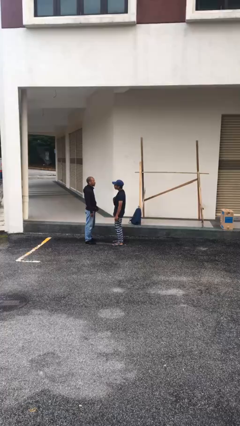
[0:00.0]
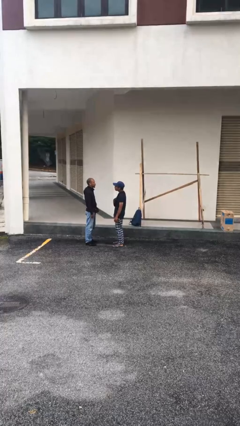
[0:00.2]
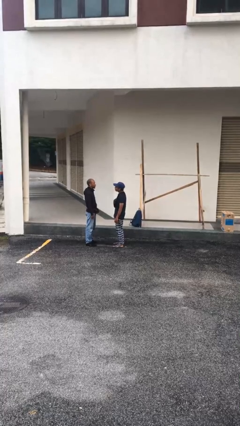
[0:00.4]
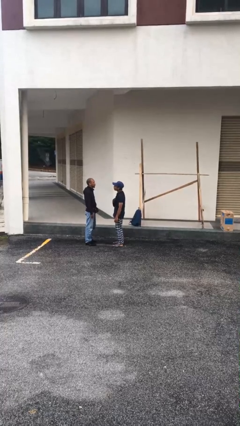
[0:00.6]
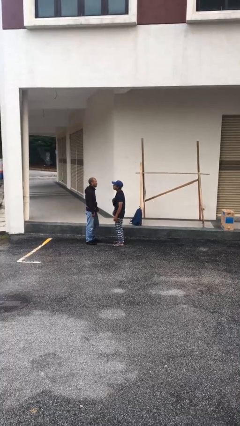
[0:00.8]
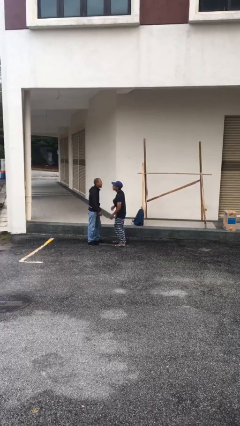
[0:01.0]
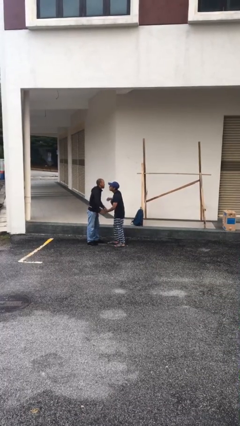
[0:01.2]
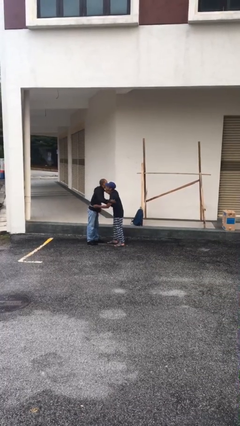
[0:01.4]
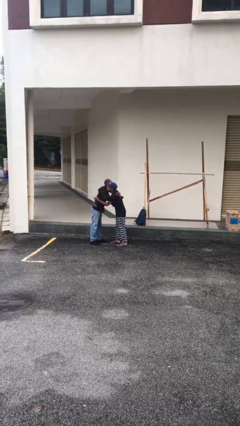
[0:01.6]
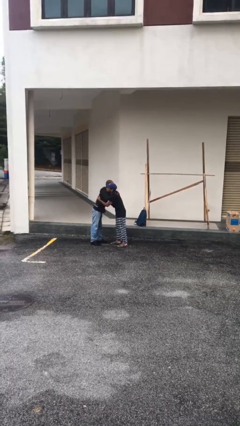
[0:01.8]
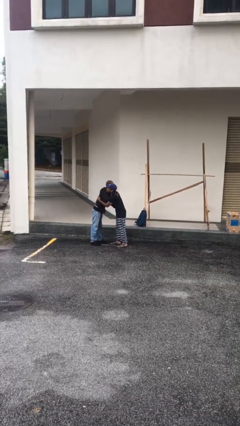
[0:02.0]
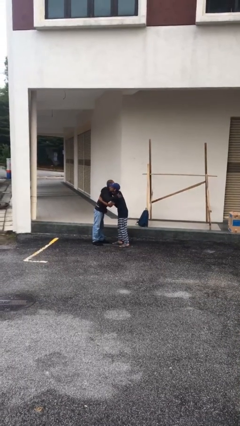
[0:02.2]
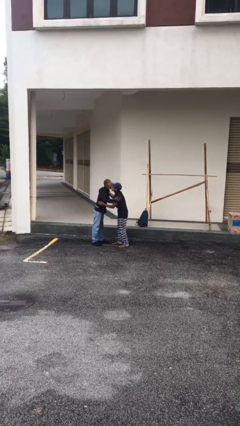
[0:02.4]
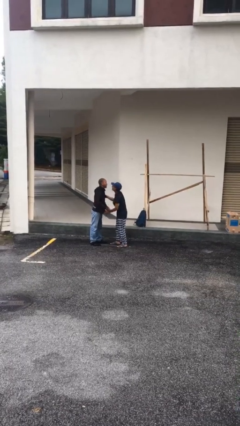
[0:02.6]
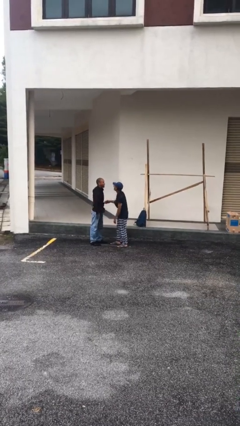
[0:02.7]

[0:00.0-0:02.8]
person embraces person

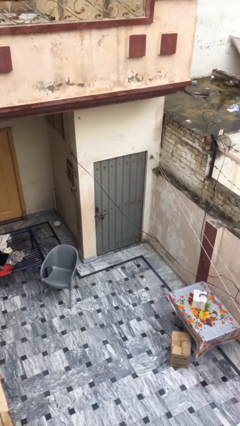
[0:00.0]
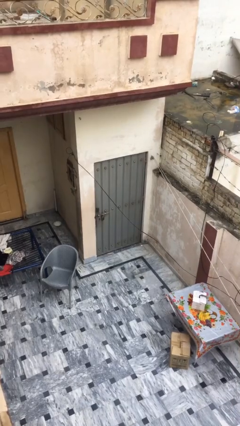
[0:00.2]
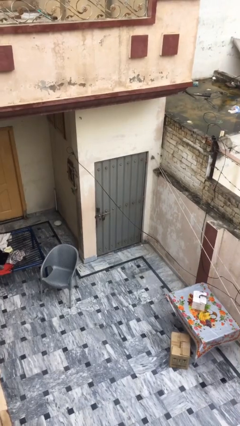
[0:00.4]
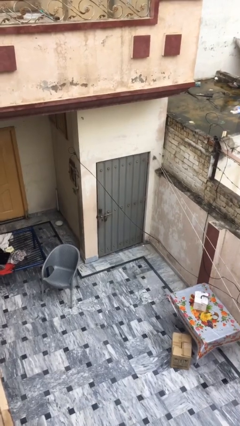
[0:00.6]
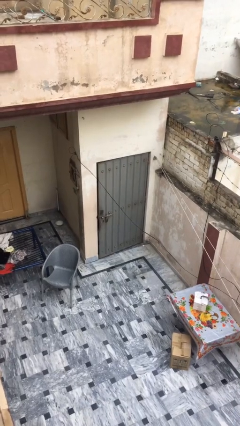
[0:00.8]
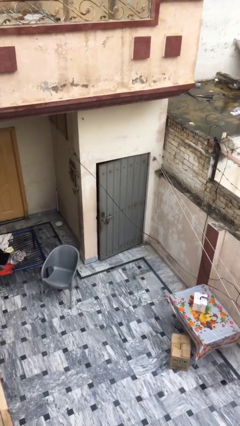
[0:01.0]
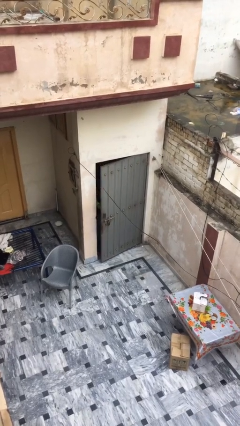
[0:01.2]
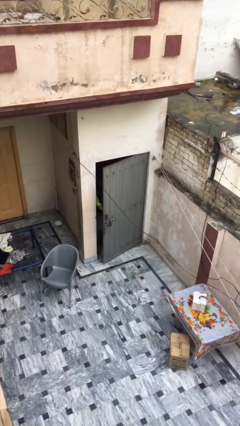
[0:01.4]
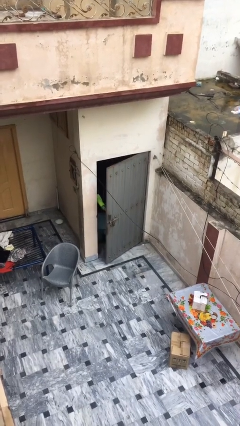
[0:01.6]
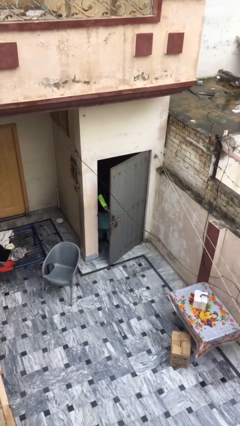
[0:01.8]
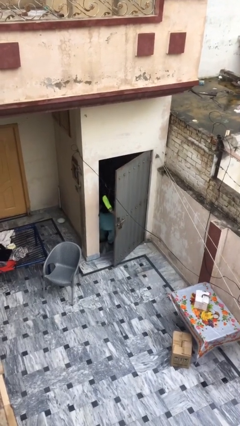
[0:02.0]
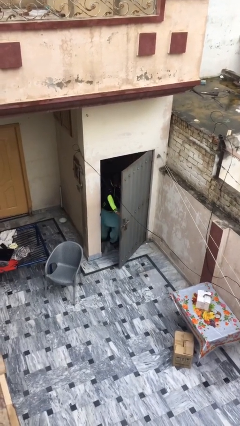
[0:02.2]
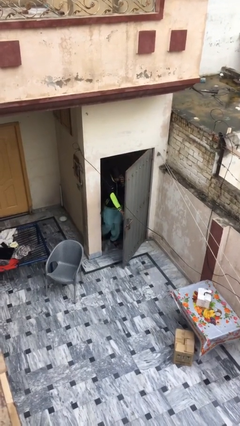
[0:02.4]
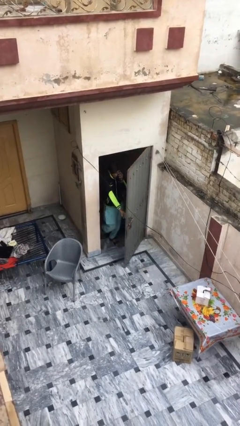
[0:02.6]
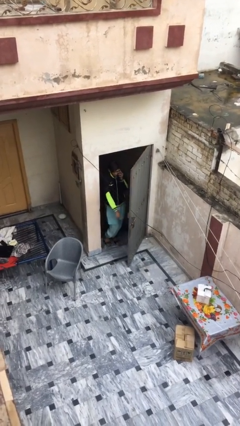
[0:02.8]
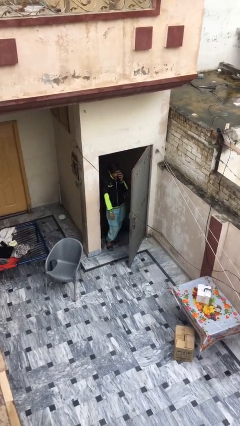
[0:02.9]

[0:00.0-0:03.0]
person opens facility door

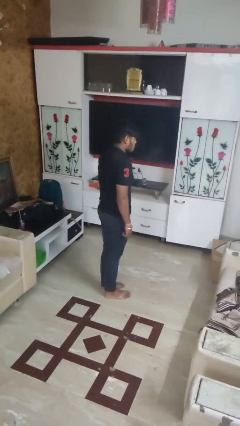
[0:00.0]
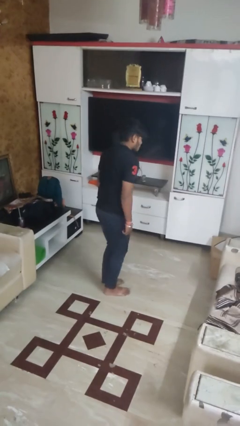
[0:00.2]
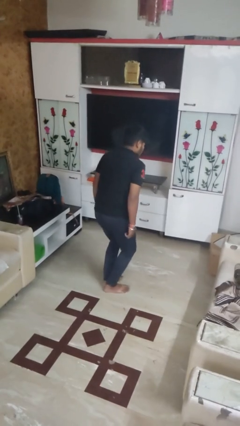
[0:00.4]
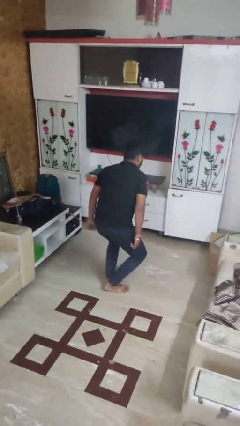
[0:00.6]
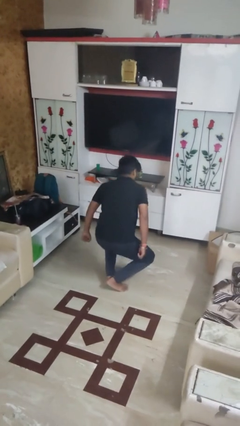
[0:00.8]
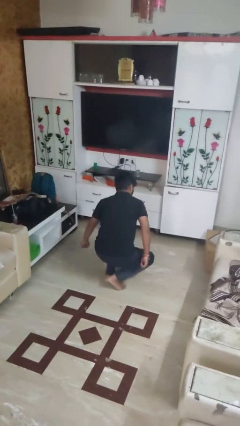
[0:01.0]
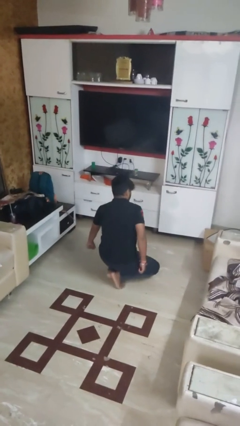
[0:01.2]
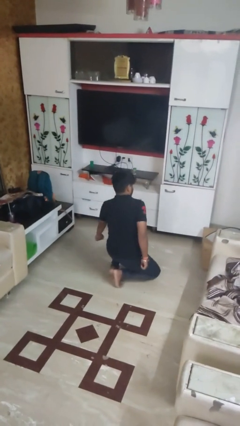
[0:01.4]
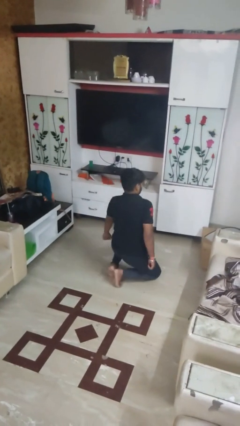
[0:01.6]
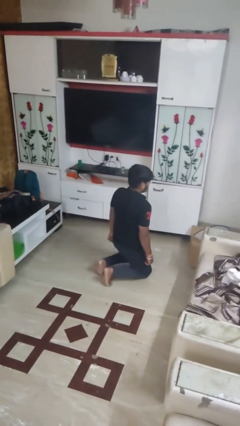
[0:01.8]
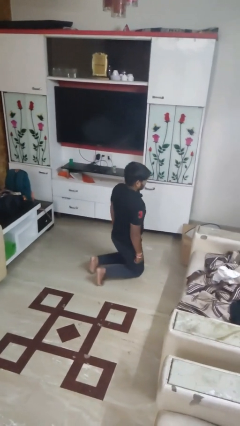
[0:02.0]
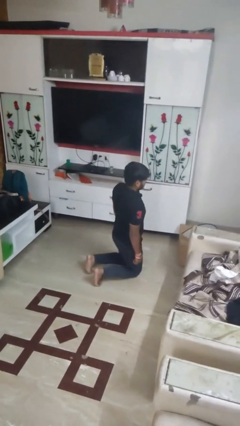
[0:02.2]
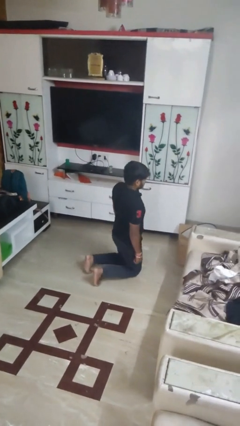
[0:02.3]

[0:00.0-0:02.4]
person kneels

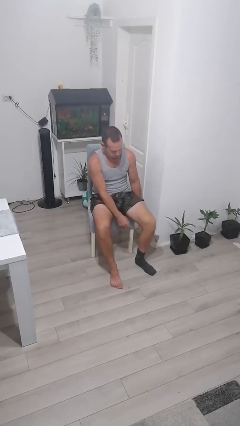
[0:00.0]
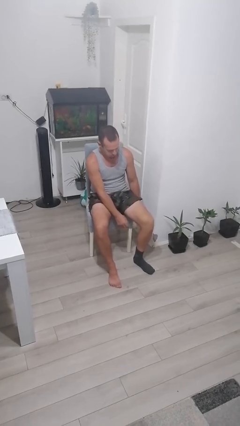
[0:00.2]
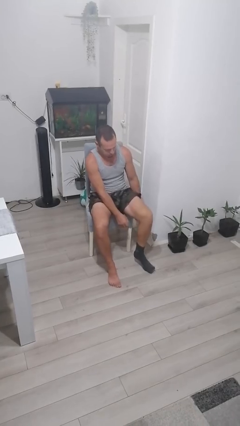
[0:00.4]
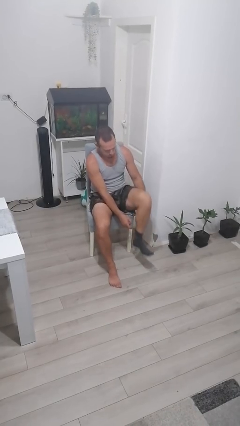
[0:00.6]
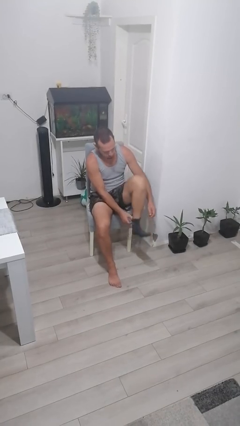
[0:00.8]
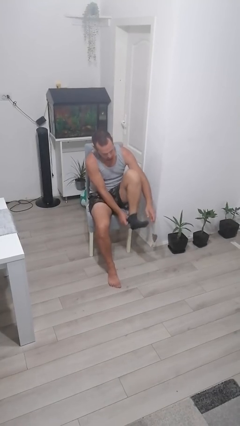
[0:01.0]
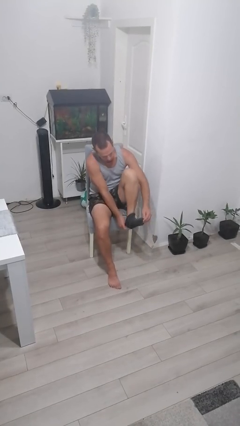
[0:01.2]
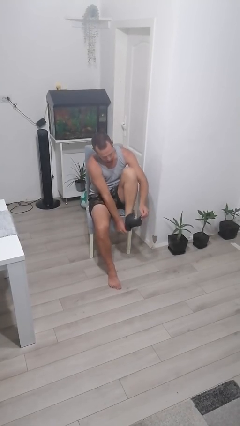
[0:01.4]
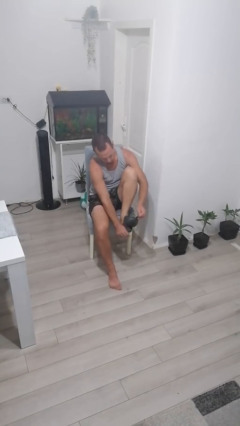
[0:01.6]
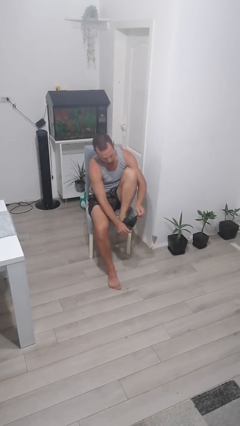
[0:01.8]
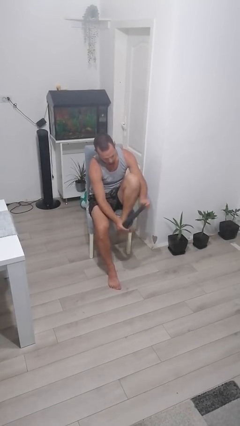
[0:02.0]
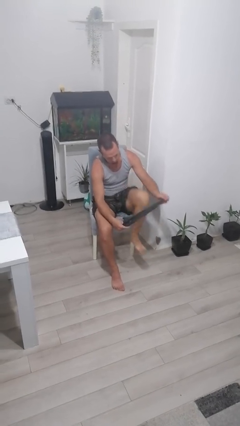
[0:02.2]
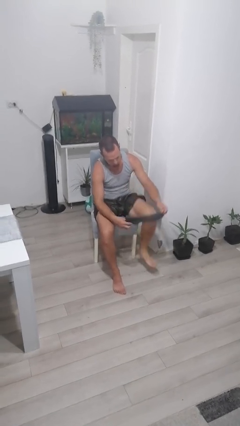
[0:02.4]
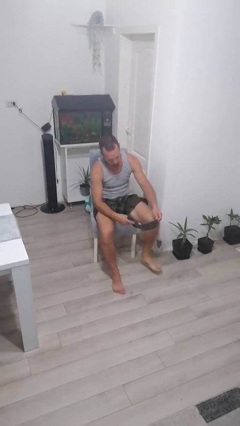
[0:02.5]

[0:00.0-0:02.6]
person takes off socks

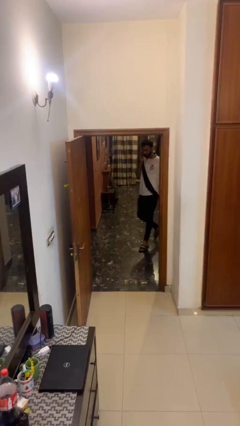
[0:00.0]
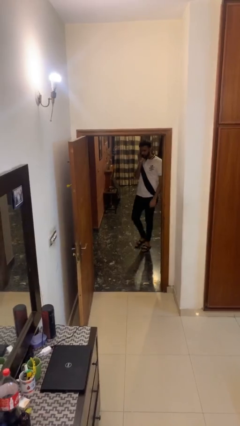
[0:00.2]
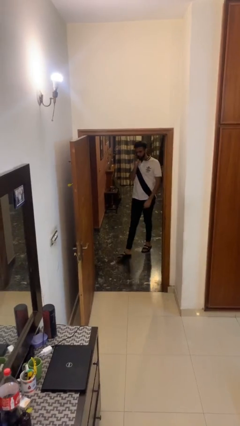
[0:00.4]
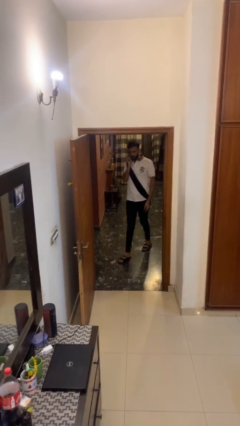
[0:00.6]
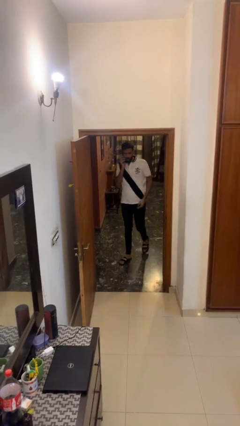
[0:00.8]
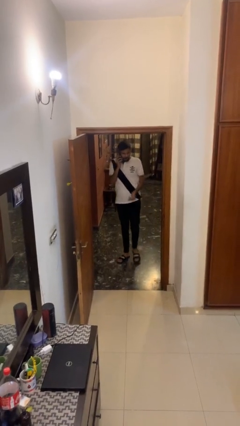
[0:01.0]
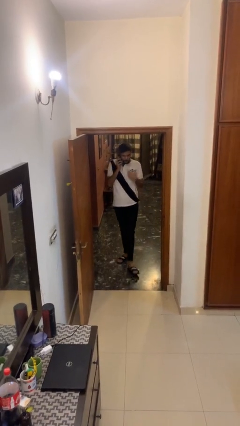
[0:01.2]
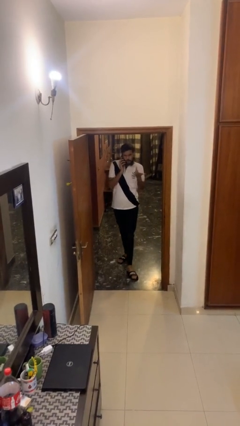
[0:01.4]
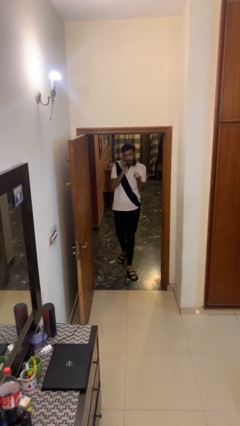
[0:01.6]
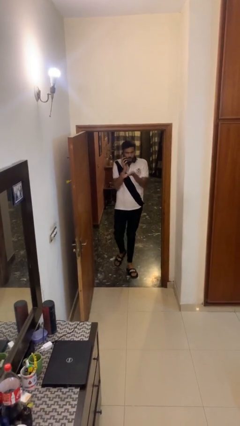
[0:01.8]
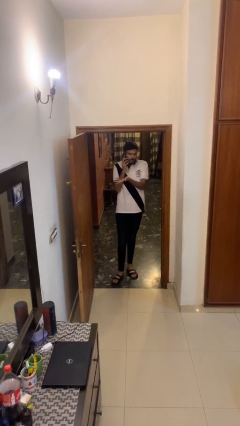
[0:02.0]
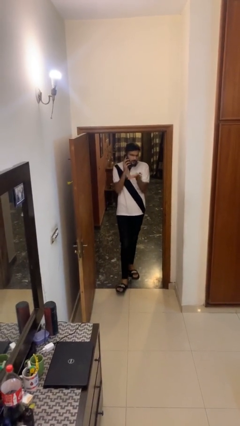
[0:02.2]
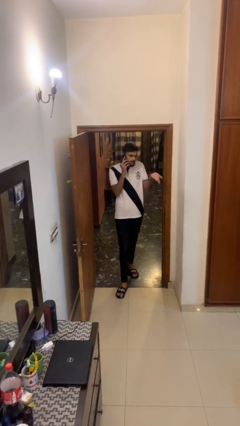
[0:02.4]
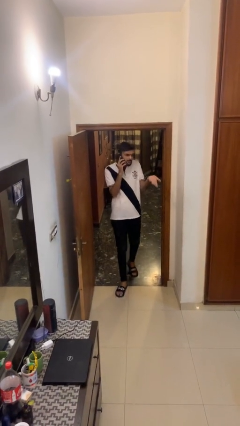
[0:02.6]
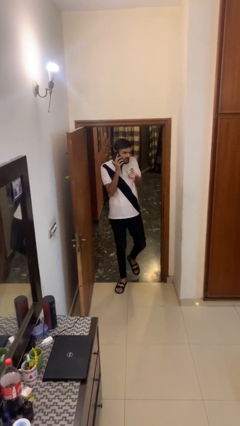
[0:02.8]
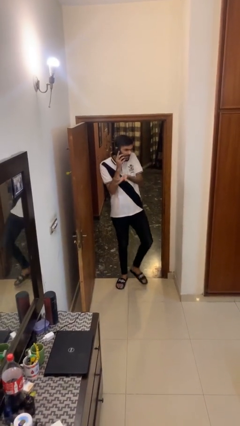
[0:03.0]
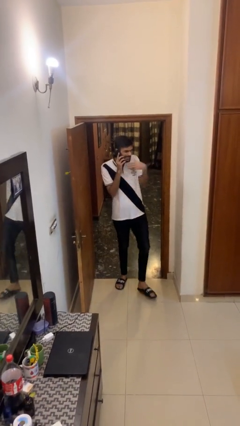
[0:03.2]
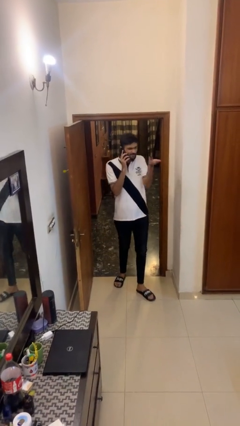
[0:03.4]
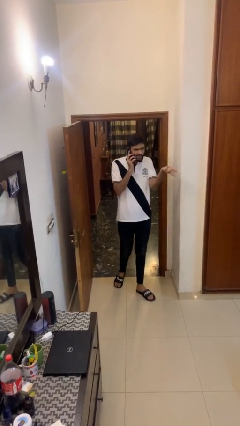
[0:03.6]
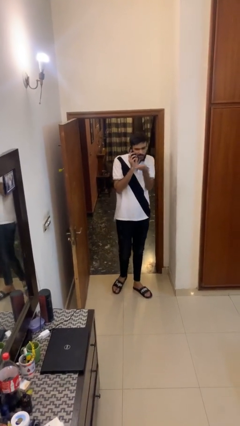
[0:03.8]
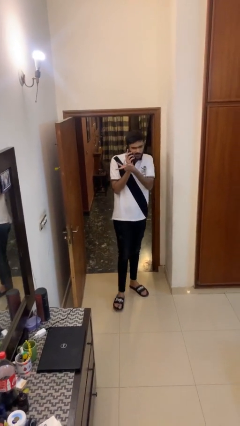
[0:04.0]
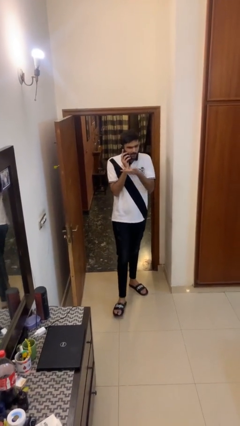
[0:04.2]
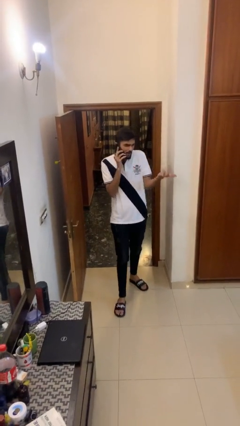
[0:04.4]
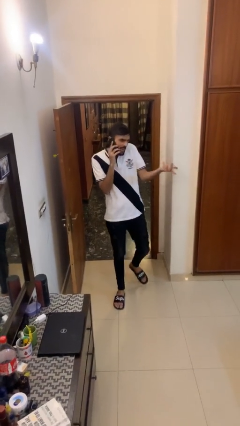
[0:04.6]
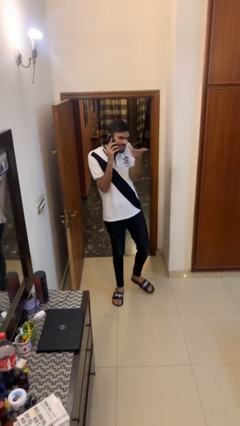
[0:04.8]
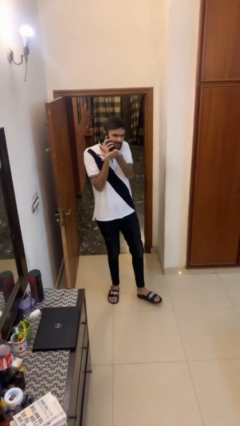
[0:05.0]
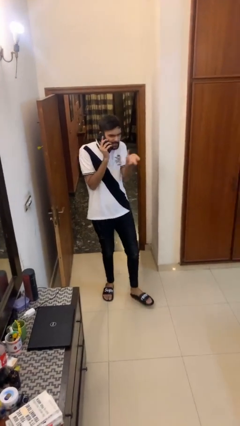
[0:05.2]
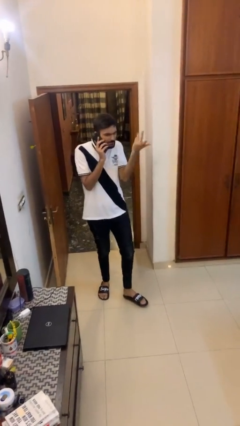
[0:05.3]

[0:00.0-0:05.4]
person enters scene through structure

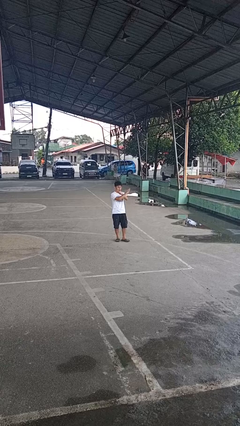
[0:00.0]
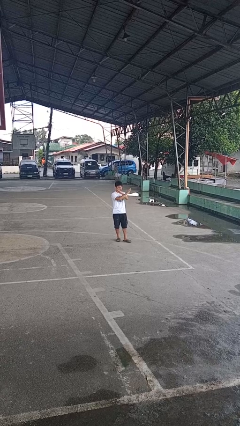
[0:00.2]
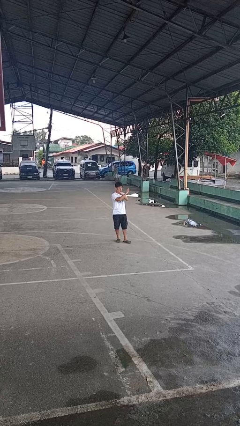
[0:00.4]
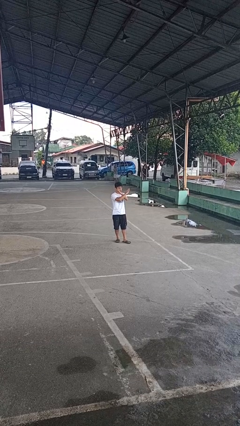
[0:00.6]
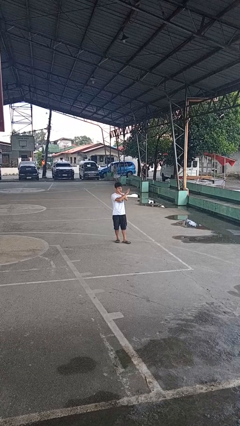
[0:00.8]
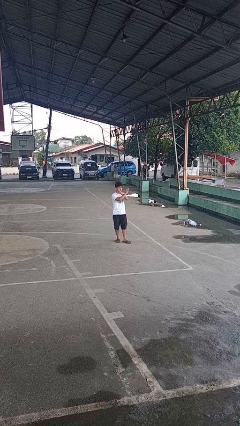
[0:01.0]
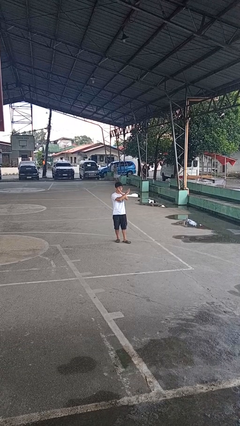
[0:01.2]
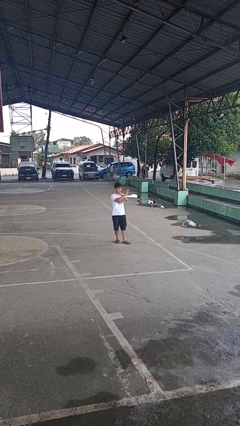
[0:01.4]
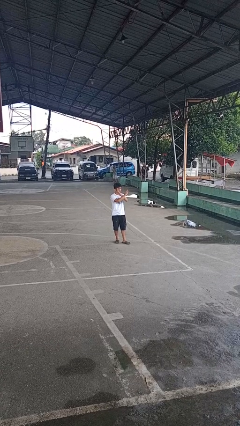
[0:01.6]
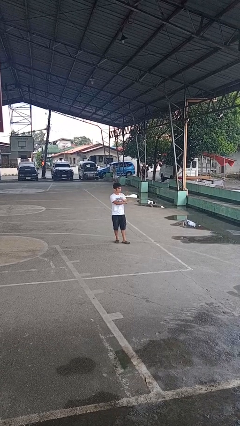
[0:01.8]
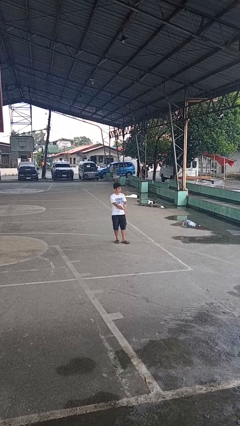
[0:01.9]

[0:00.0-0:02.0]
person gestures arms x
